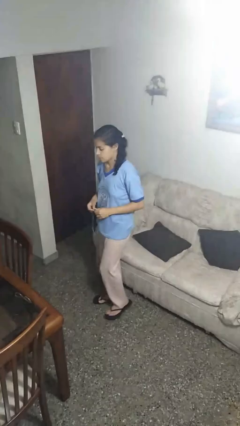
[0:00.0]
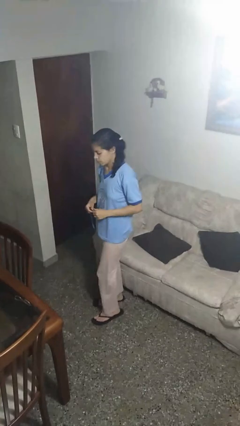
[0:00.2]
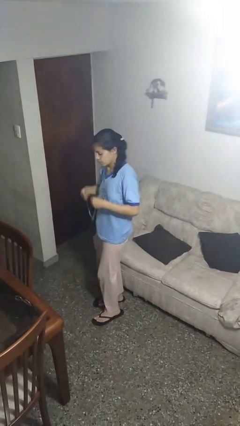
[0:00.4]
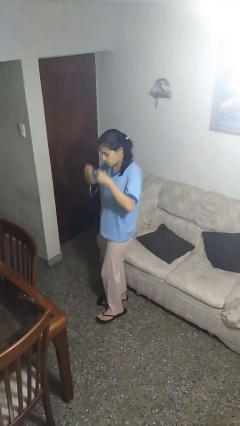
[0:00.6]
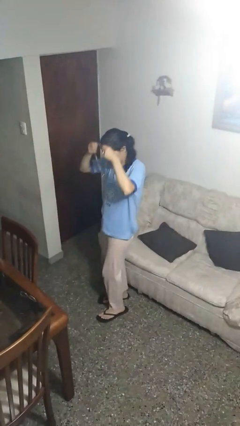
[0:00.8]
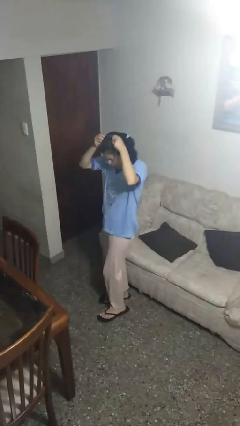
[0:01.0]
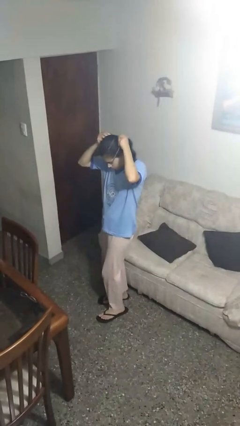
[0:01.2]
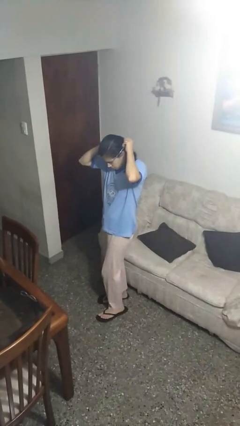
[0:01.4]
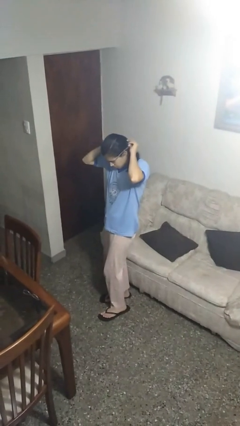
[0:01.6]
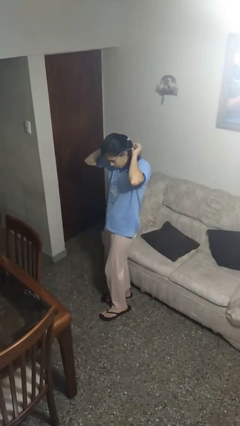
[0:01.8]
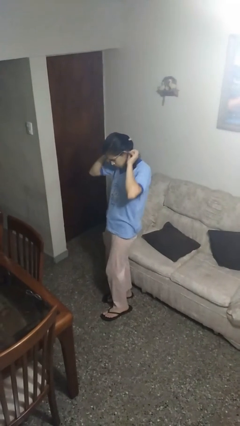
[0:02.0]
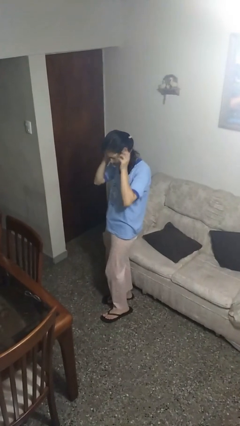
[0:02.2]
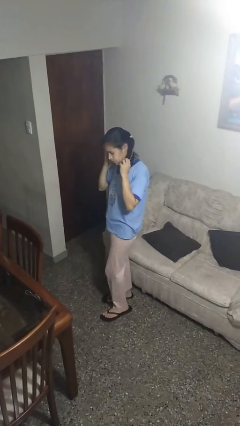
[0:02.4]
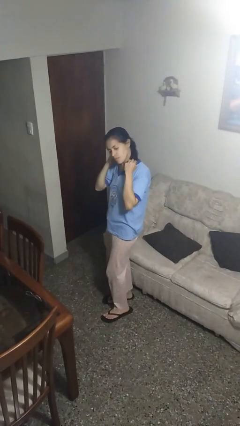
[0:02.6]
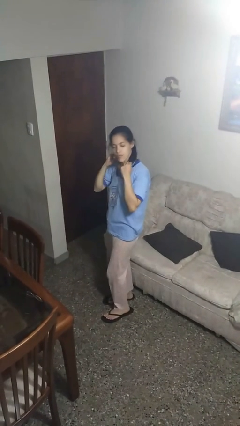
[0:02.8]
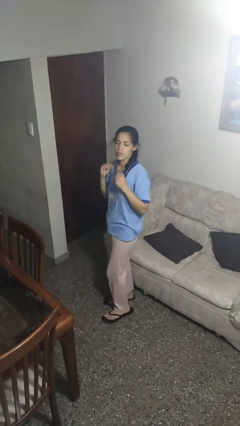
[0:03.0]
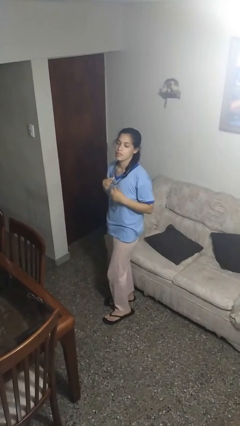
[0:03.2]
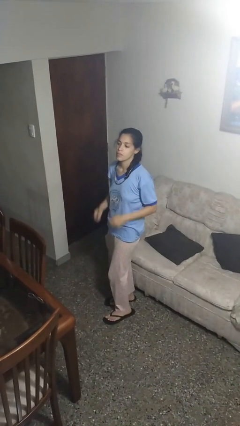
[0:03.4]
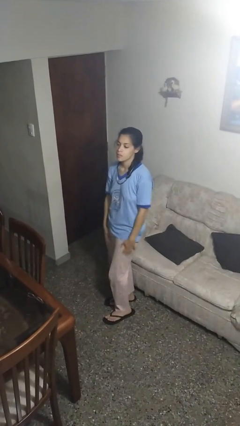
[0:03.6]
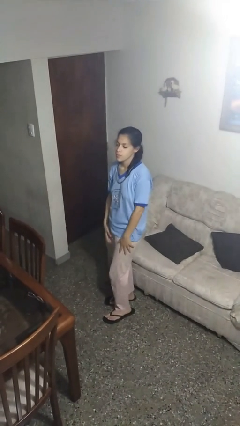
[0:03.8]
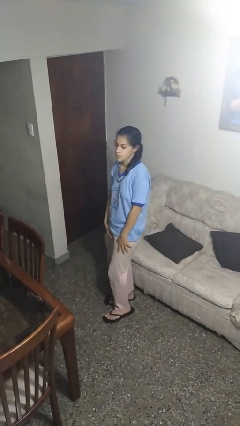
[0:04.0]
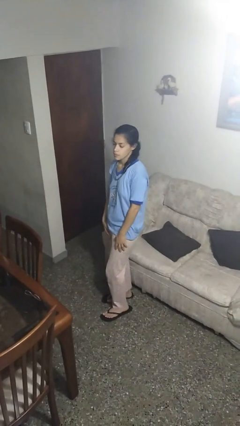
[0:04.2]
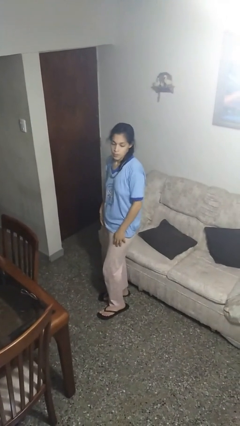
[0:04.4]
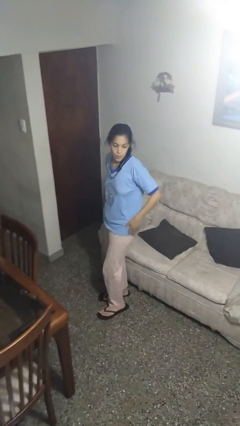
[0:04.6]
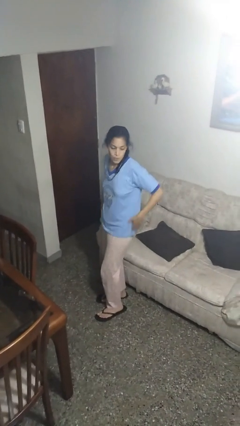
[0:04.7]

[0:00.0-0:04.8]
person puts on necklace

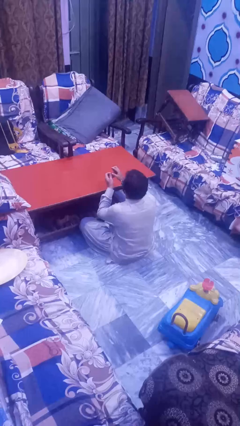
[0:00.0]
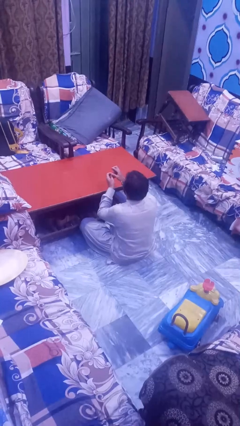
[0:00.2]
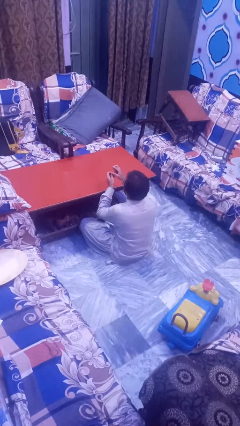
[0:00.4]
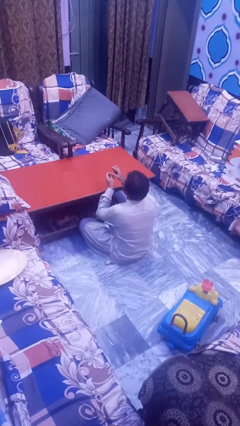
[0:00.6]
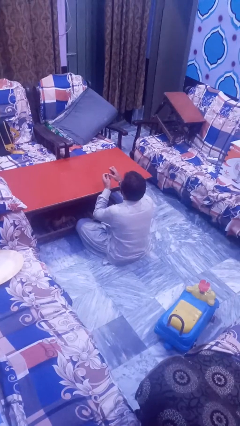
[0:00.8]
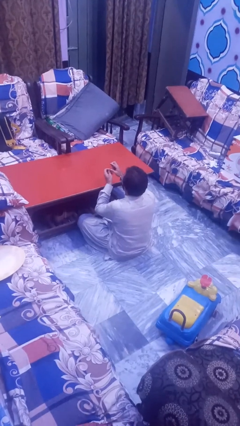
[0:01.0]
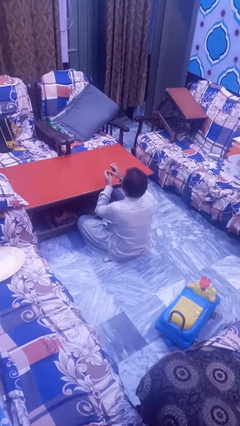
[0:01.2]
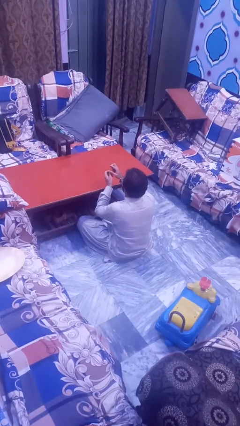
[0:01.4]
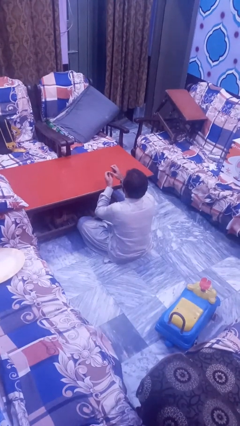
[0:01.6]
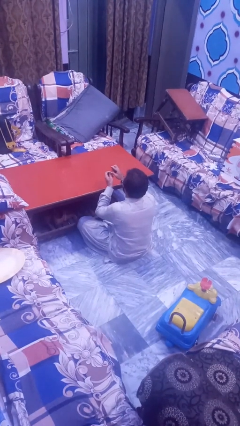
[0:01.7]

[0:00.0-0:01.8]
person files fingernails

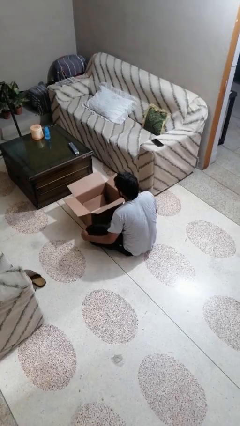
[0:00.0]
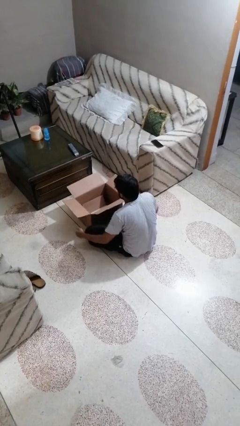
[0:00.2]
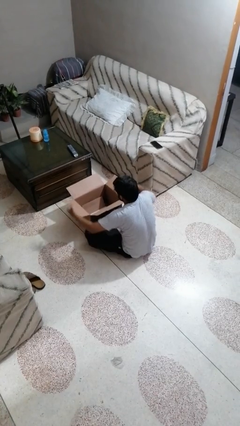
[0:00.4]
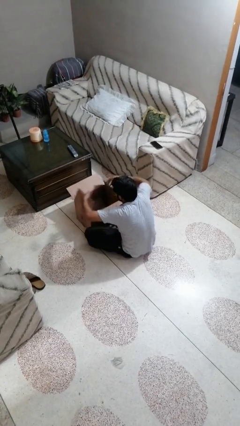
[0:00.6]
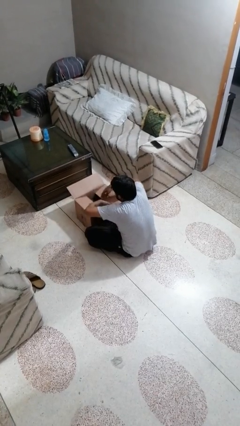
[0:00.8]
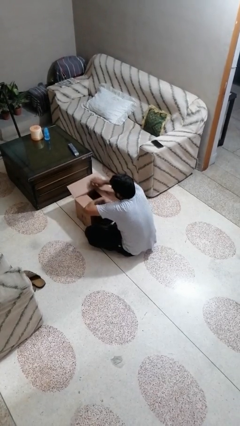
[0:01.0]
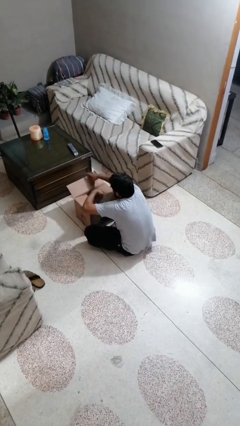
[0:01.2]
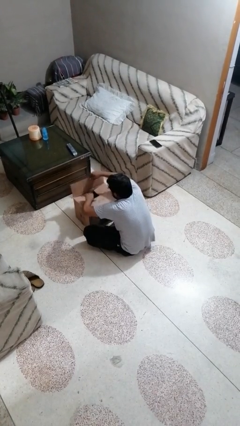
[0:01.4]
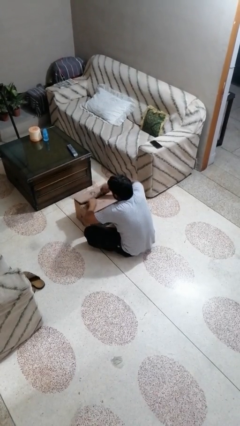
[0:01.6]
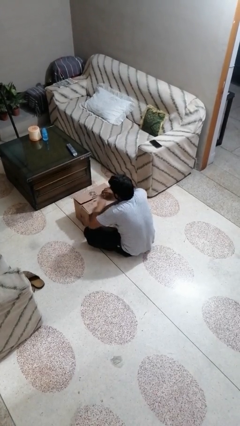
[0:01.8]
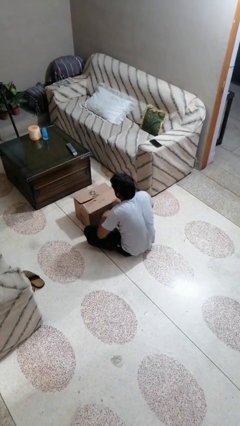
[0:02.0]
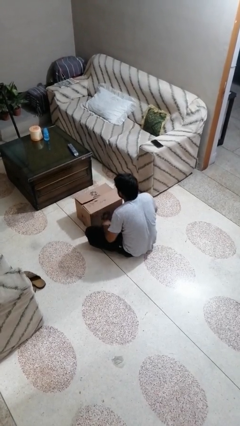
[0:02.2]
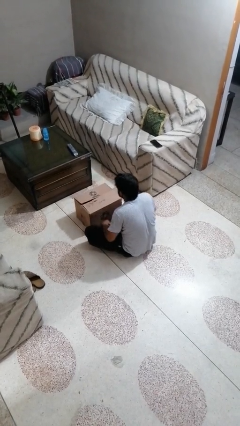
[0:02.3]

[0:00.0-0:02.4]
person closes box

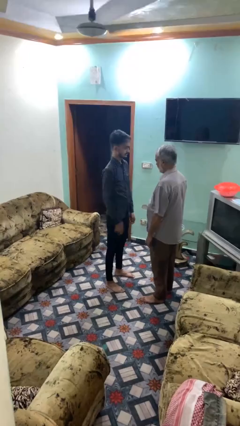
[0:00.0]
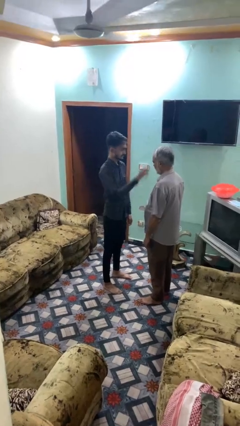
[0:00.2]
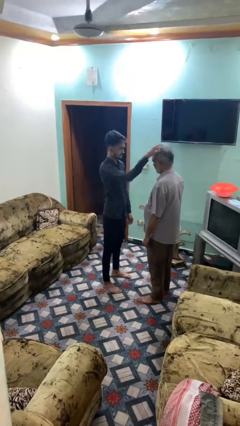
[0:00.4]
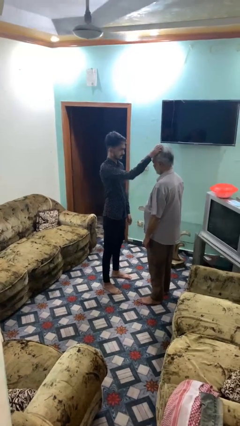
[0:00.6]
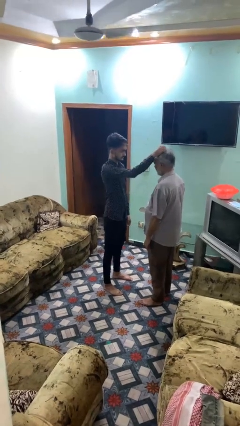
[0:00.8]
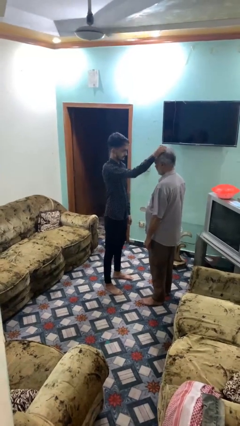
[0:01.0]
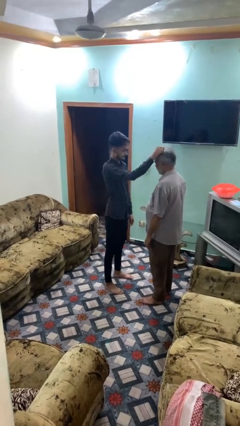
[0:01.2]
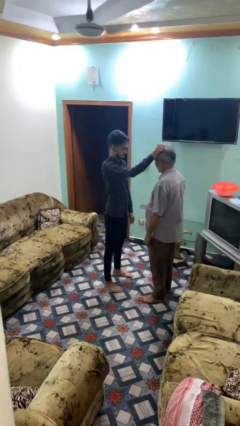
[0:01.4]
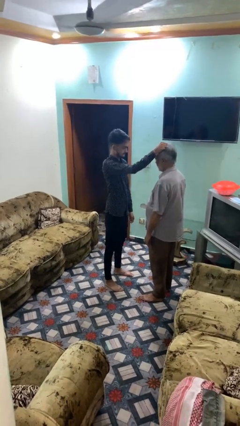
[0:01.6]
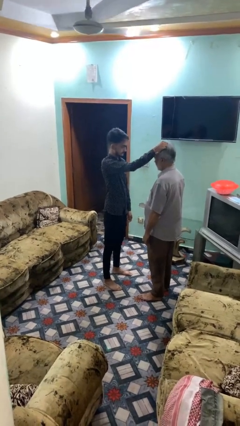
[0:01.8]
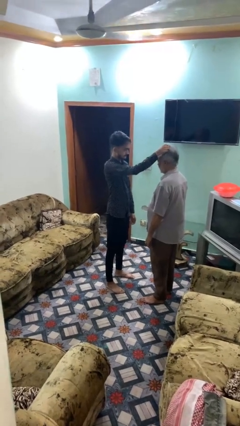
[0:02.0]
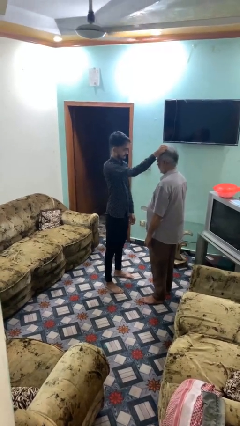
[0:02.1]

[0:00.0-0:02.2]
person grabs person by hair

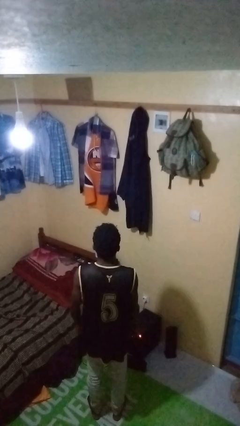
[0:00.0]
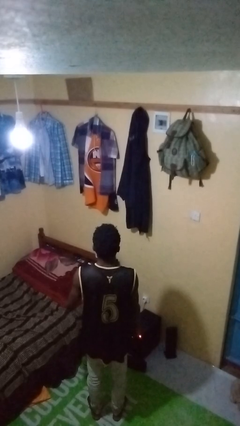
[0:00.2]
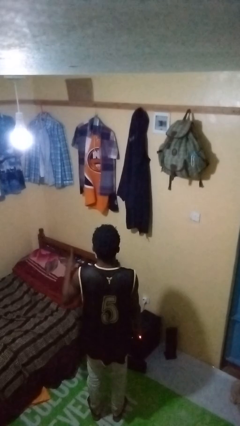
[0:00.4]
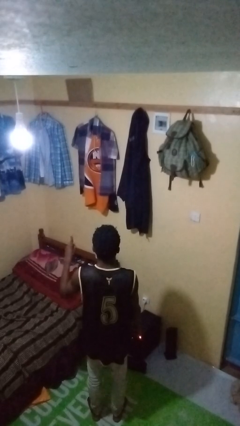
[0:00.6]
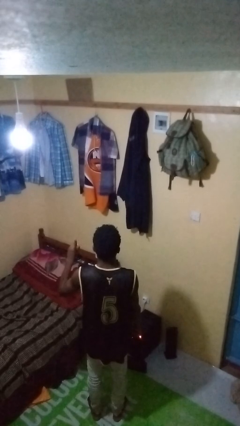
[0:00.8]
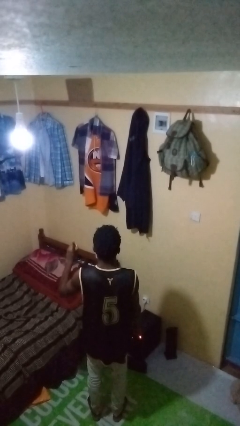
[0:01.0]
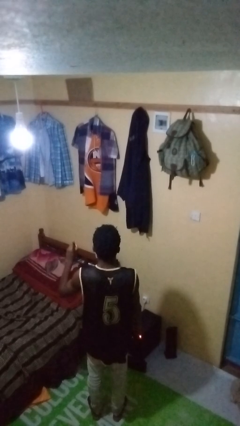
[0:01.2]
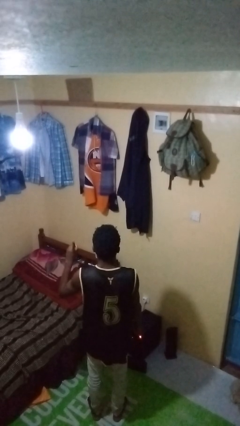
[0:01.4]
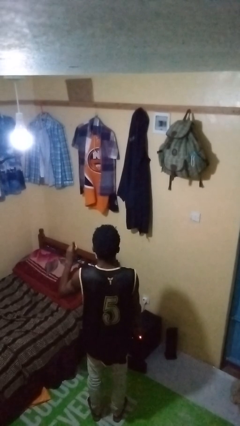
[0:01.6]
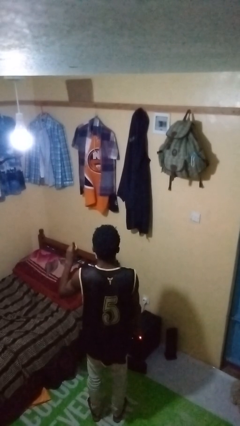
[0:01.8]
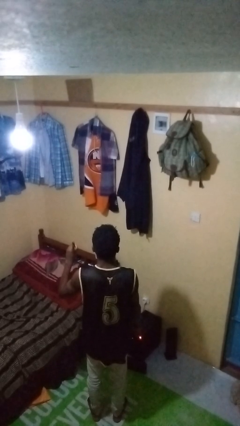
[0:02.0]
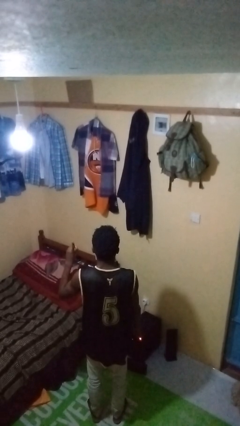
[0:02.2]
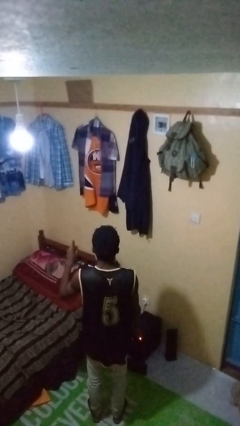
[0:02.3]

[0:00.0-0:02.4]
person gestures number one

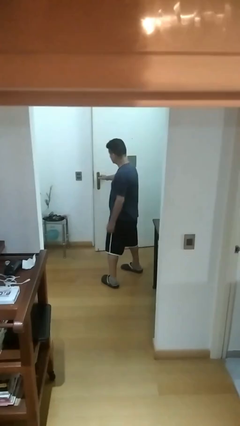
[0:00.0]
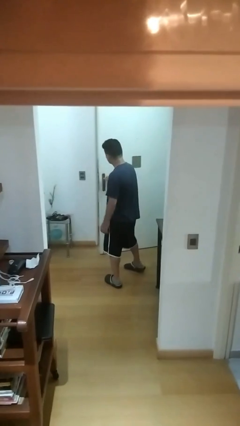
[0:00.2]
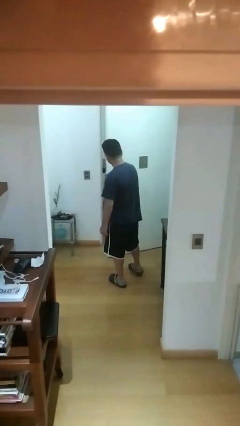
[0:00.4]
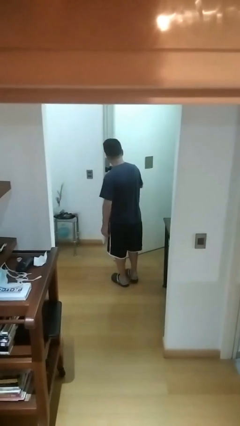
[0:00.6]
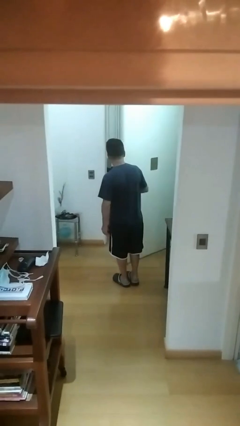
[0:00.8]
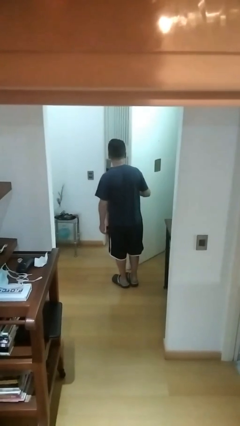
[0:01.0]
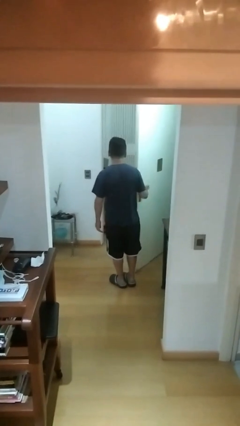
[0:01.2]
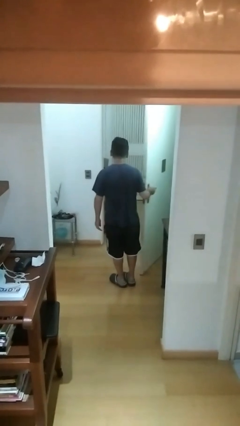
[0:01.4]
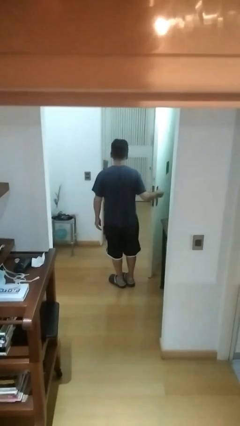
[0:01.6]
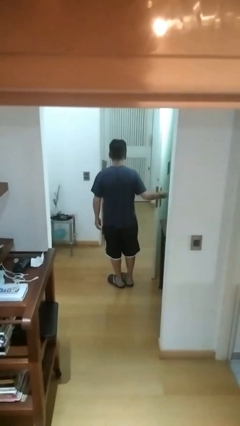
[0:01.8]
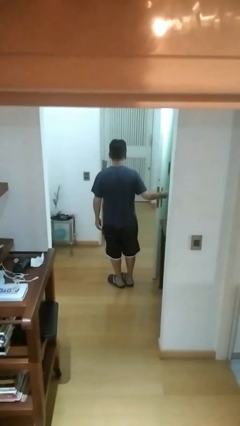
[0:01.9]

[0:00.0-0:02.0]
person opens facility door

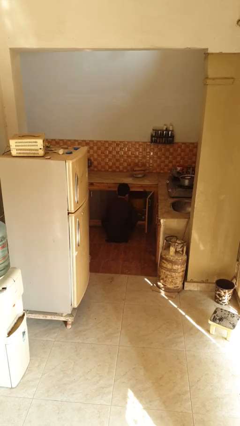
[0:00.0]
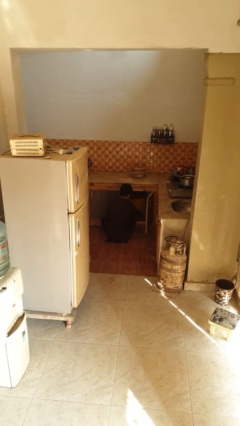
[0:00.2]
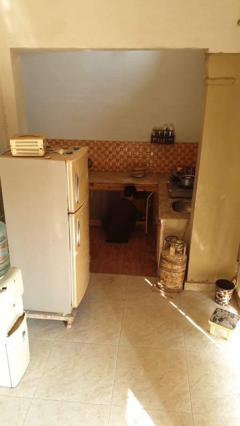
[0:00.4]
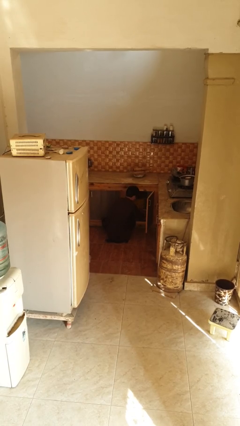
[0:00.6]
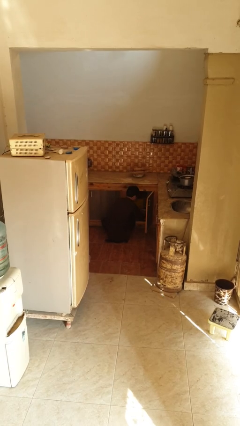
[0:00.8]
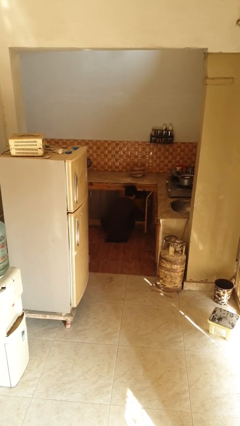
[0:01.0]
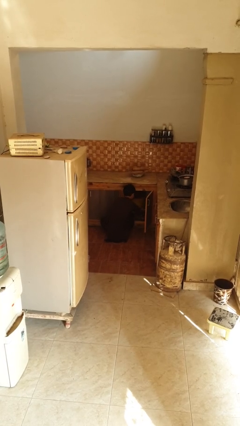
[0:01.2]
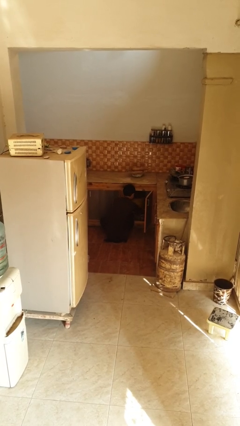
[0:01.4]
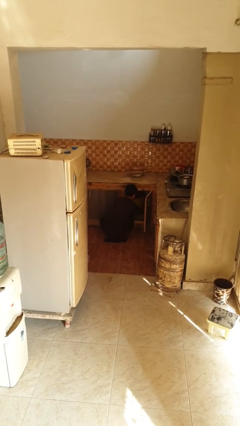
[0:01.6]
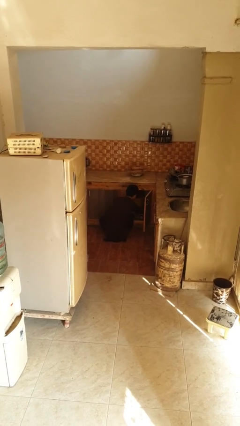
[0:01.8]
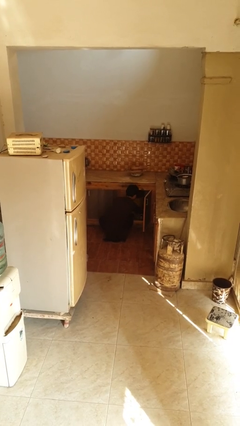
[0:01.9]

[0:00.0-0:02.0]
person searches in kitchen drawer
